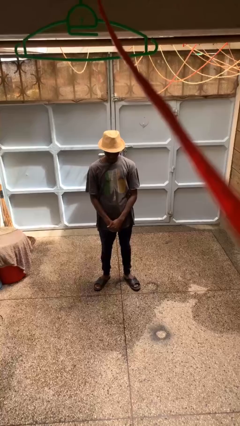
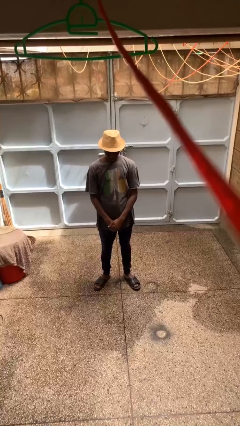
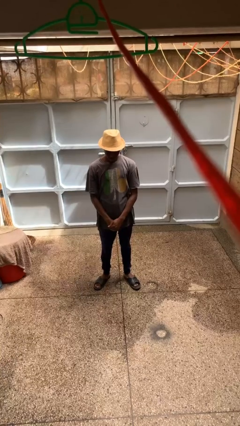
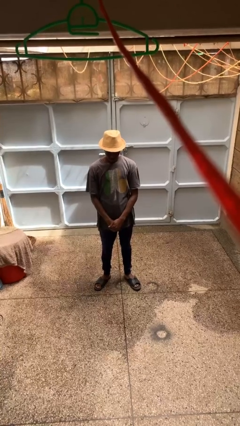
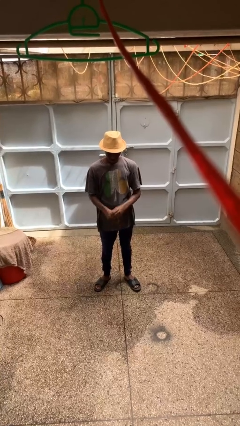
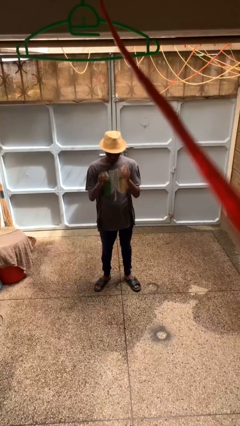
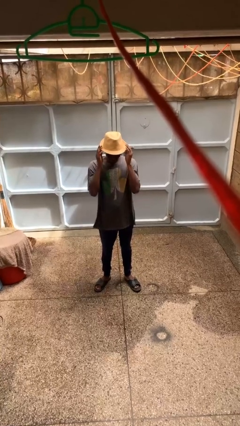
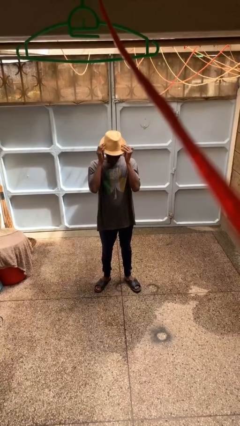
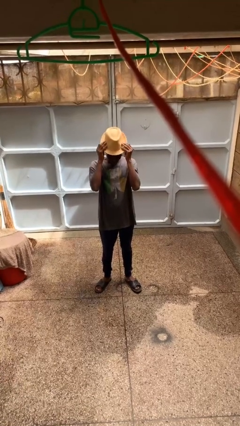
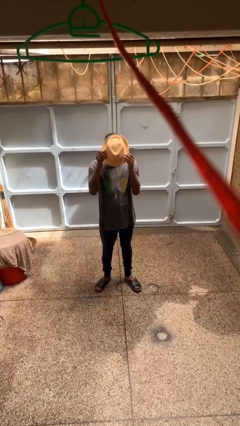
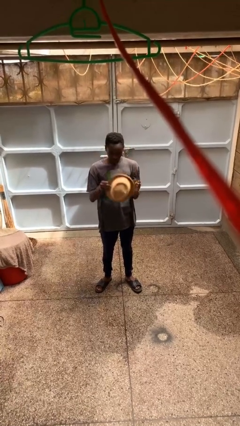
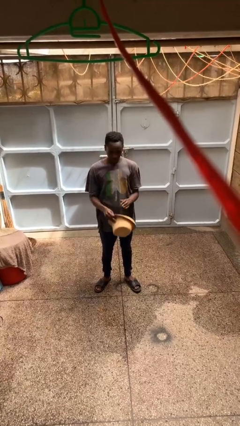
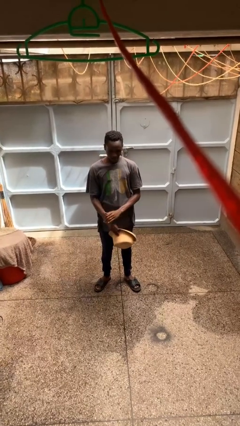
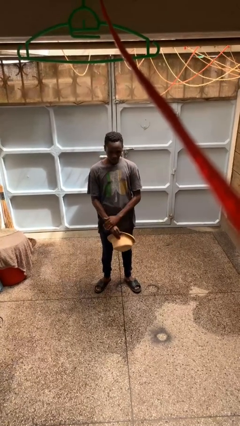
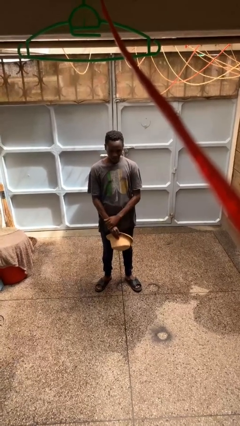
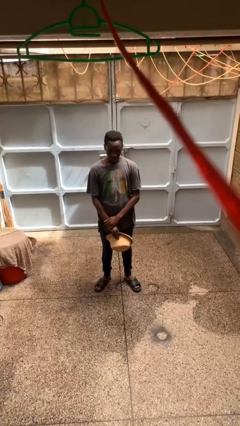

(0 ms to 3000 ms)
person takes off hat

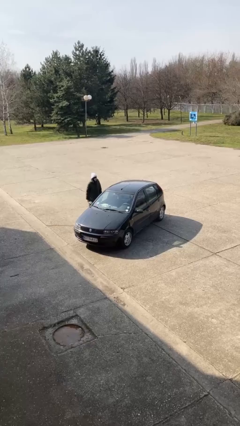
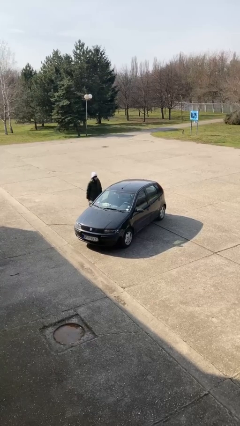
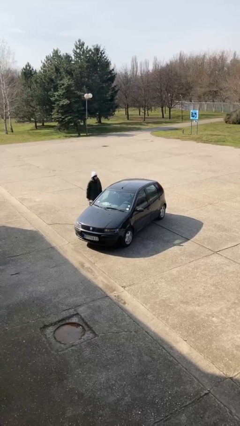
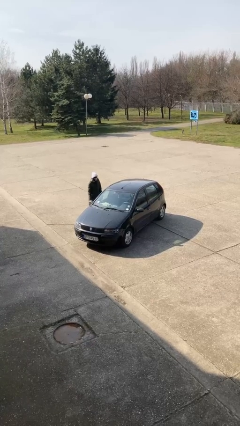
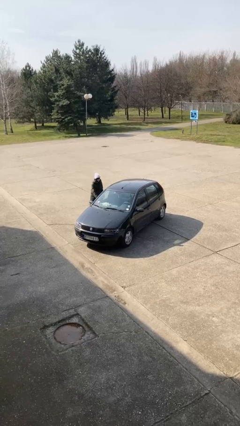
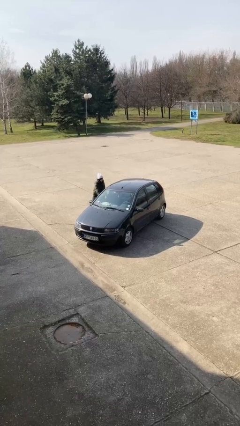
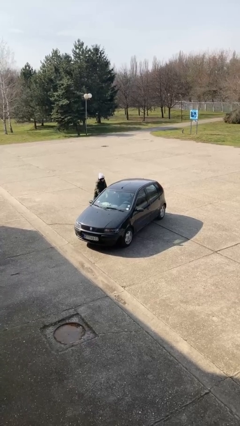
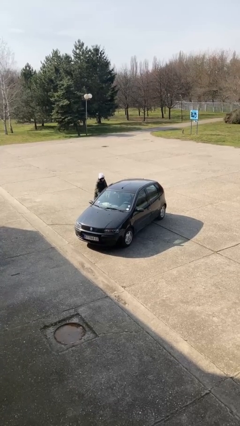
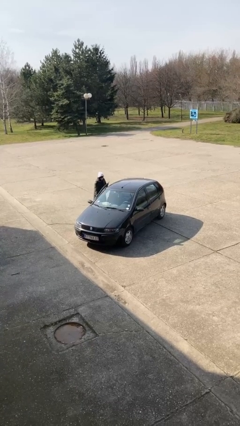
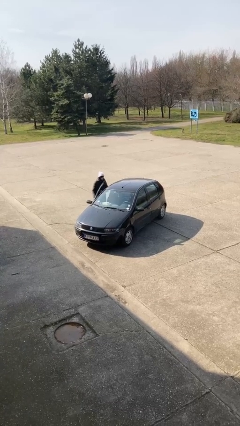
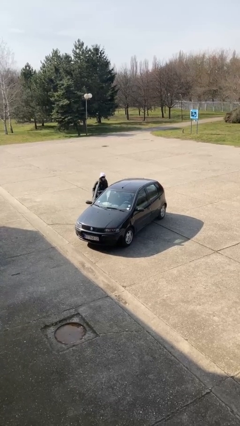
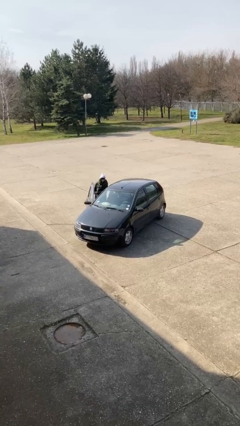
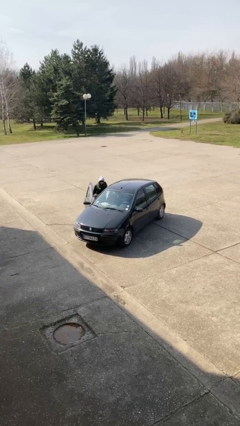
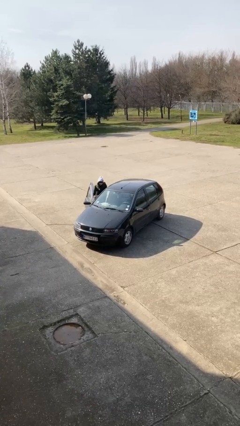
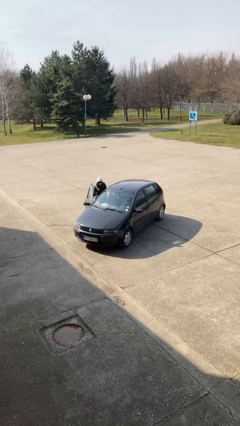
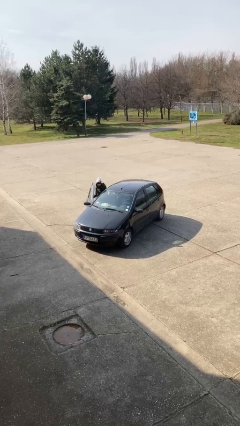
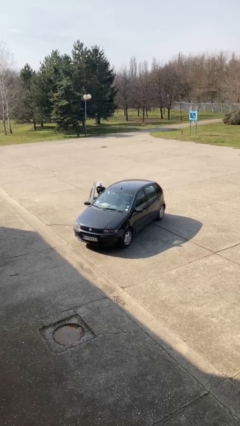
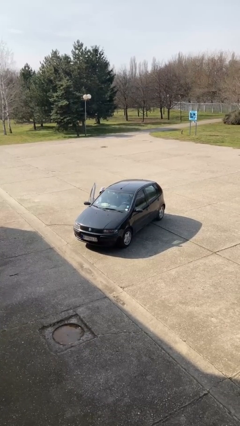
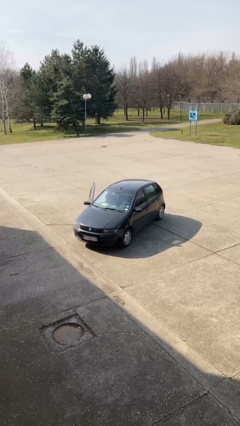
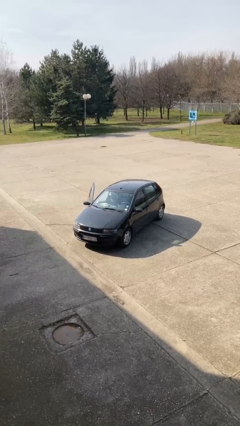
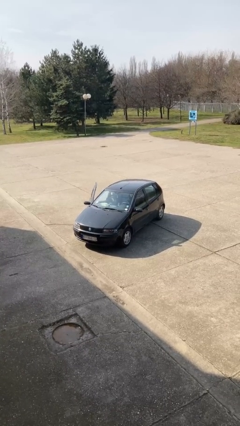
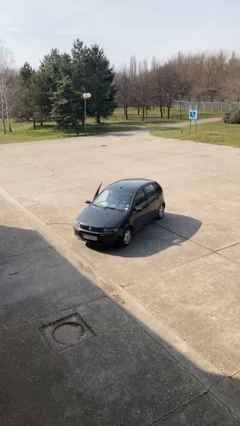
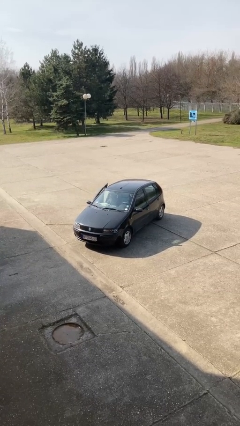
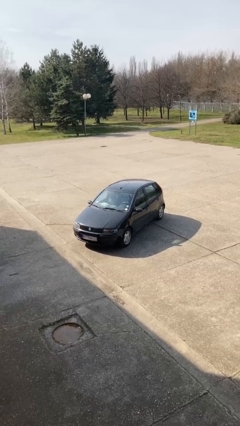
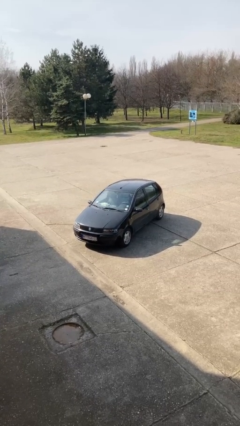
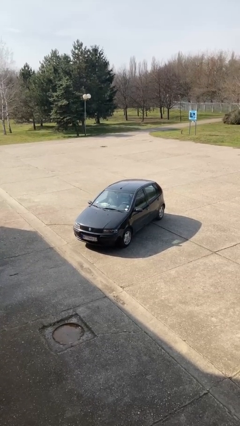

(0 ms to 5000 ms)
car picks up person

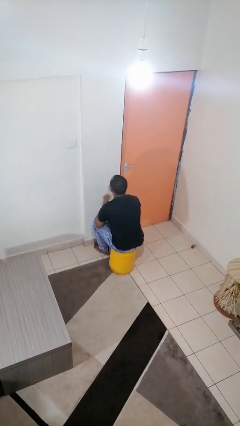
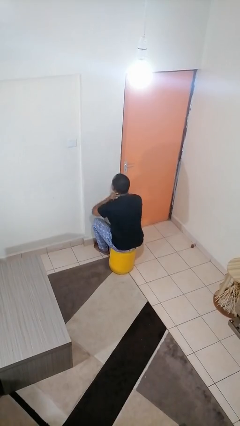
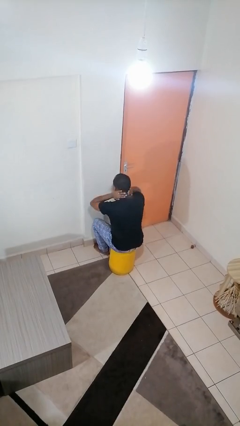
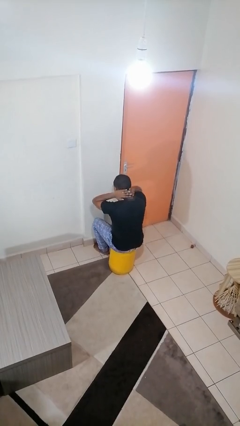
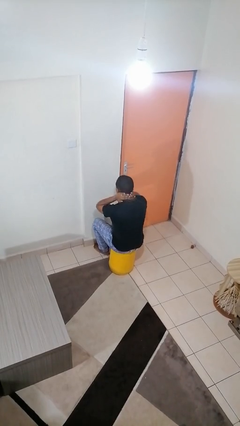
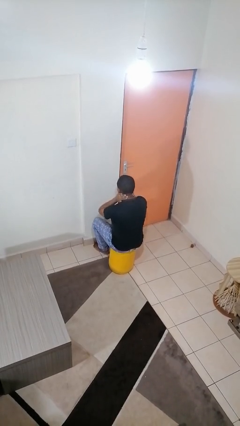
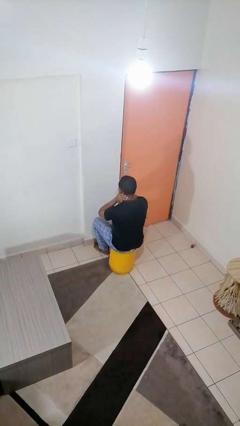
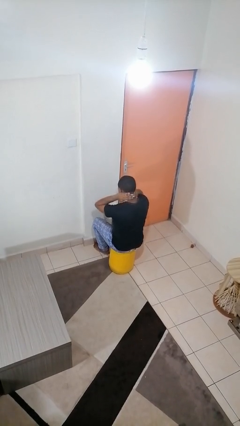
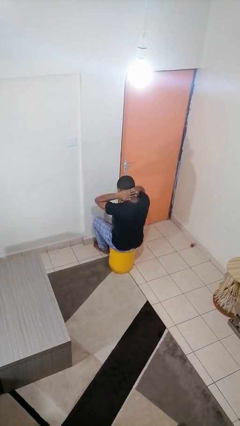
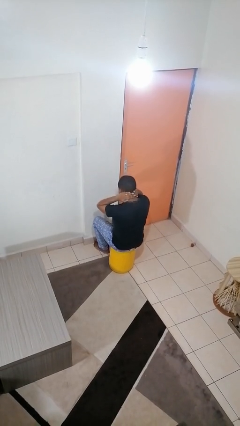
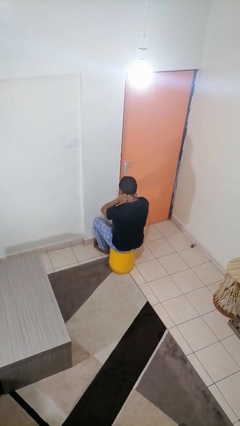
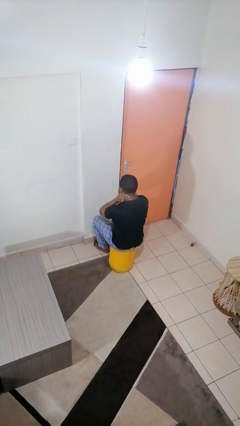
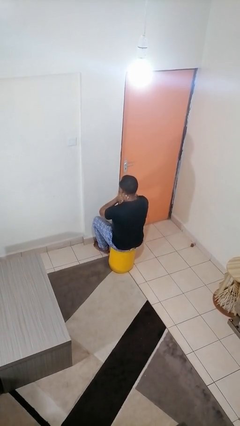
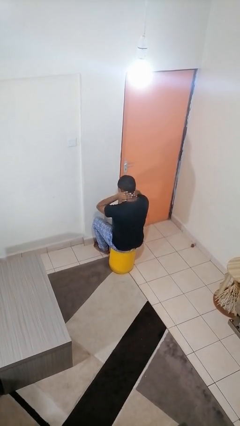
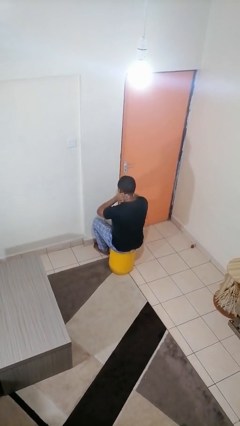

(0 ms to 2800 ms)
person rubs neck

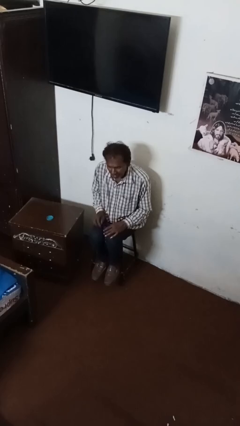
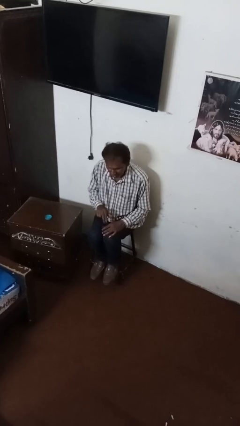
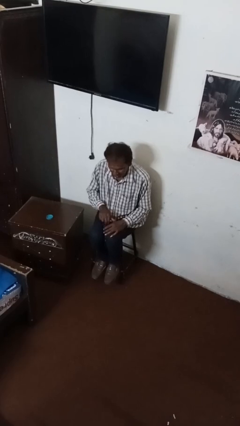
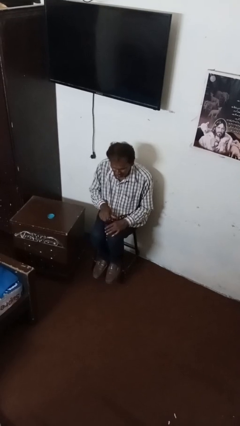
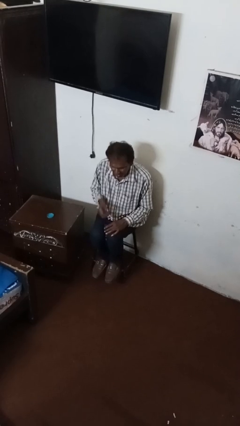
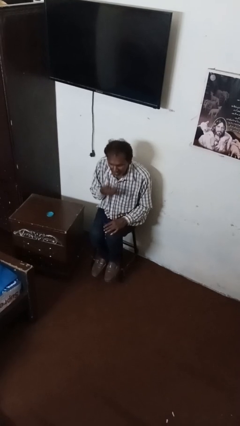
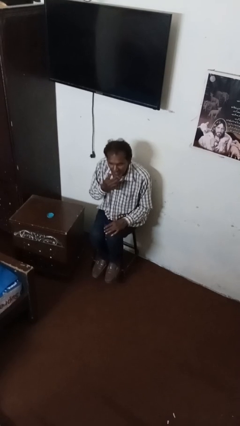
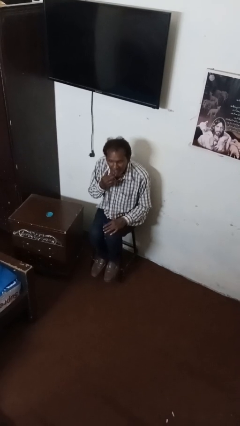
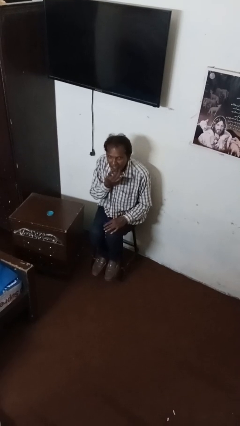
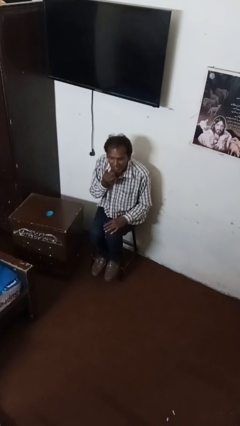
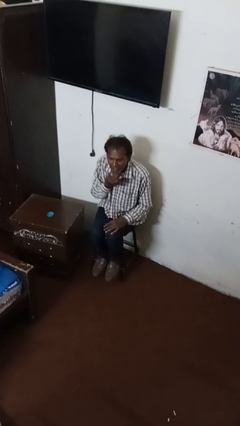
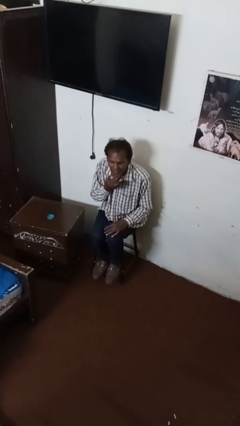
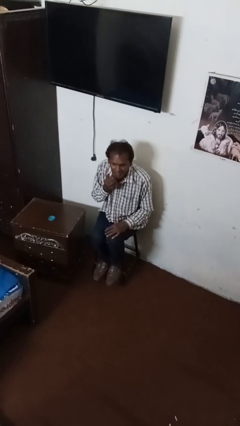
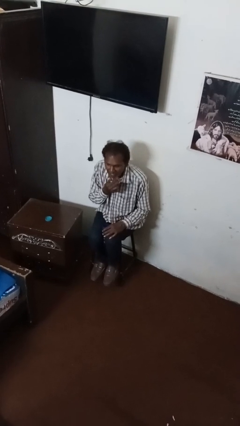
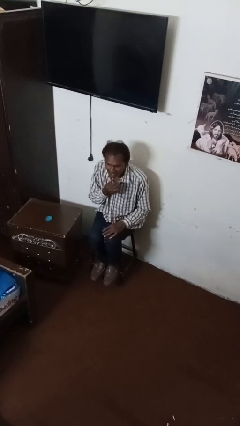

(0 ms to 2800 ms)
person strokes chin

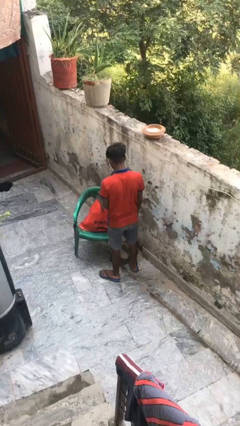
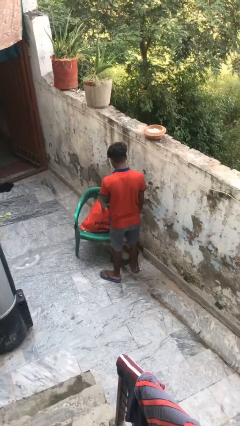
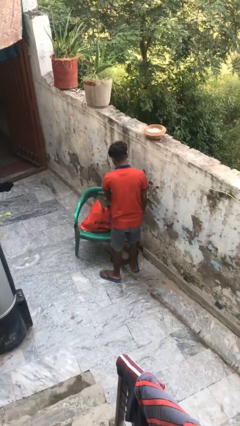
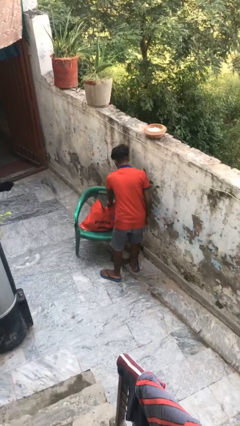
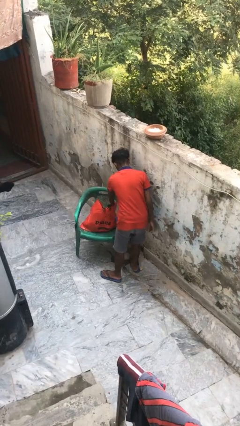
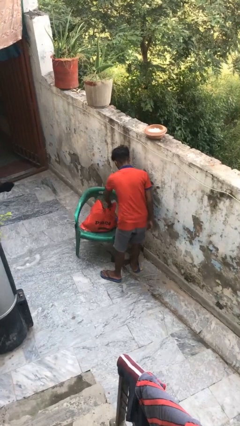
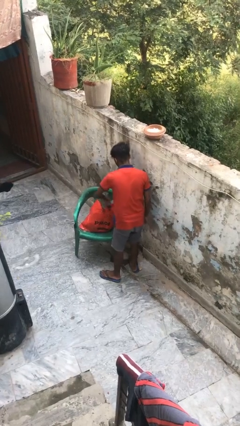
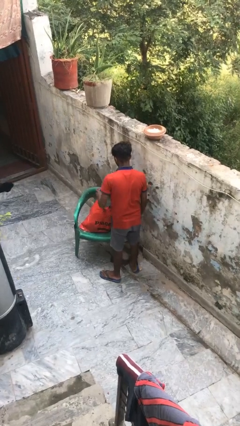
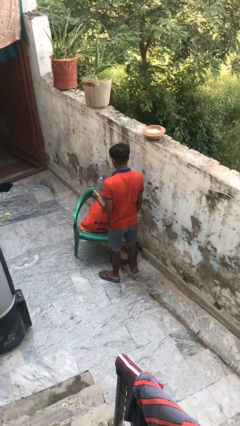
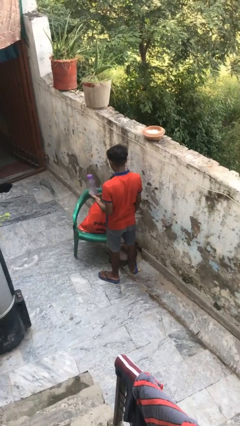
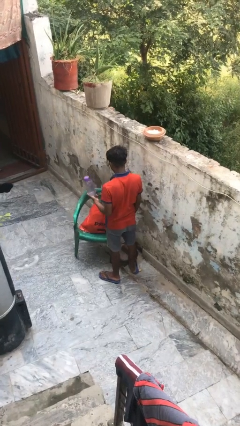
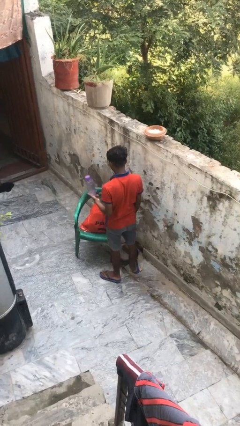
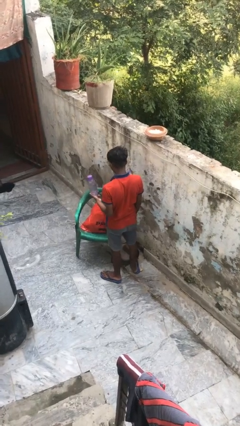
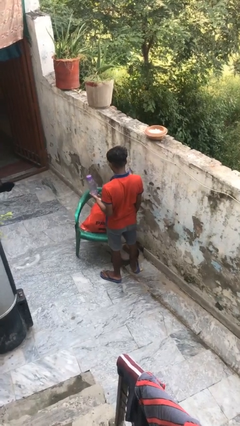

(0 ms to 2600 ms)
person takes object from bag

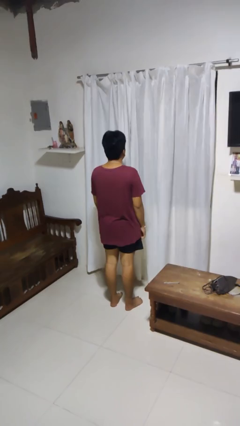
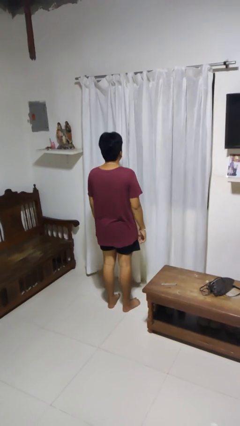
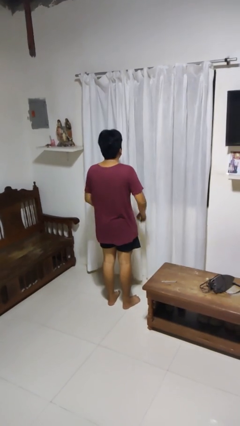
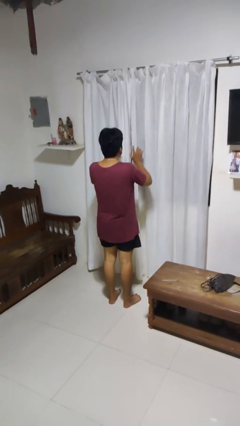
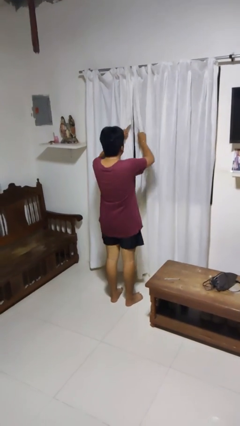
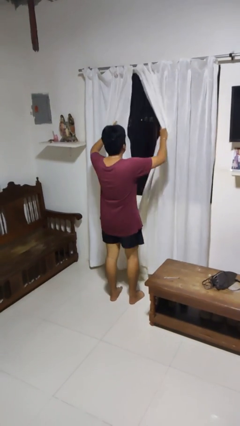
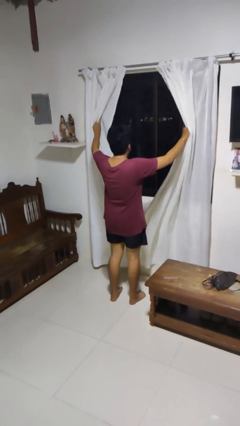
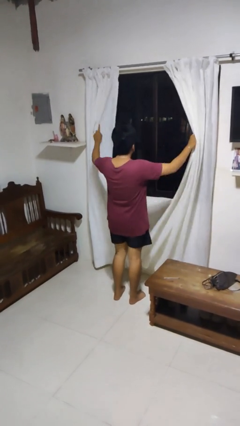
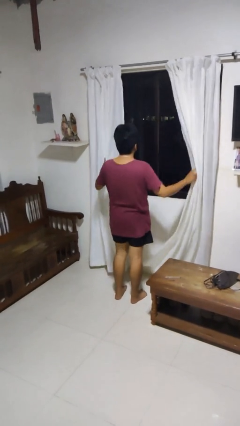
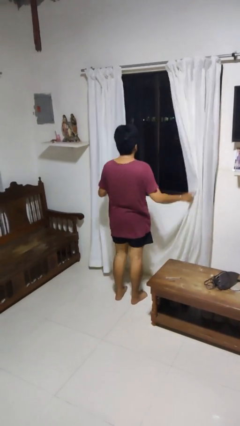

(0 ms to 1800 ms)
person opens curtains
